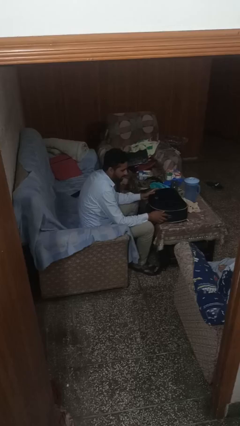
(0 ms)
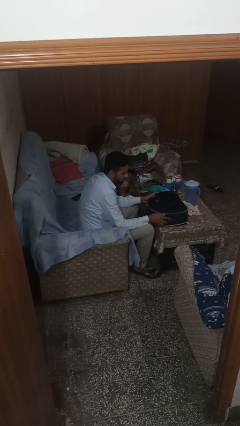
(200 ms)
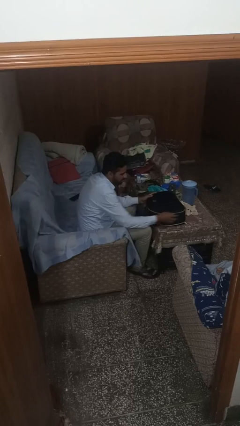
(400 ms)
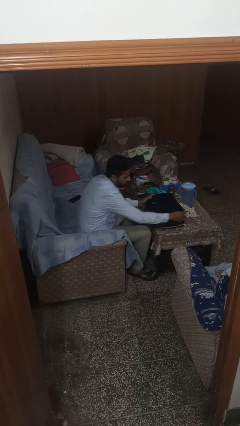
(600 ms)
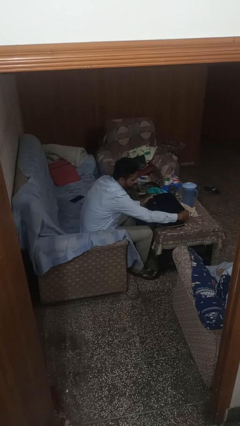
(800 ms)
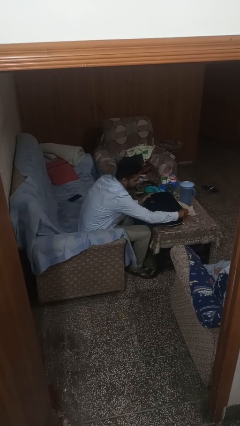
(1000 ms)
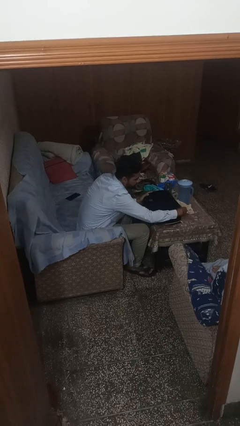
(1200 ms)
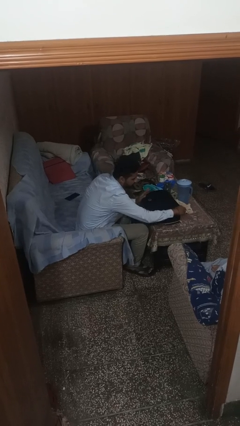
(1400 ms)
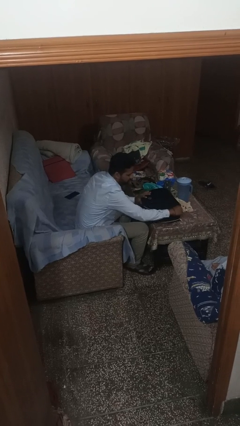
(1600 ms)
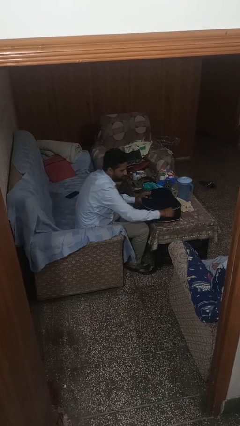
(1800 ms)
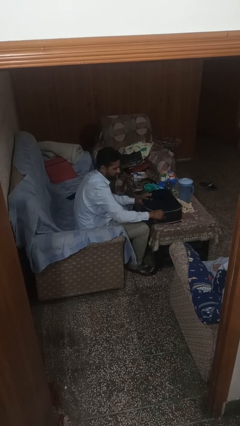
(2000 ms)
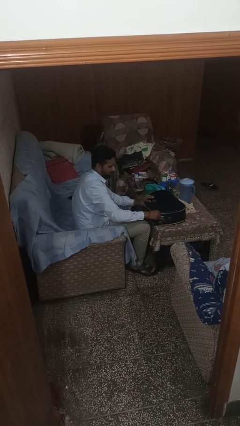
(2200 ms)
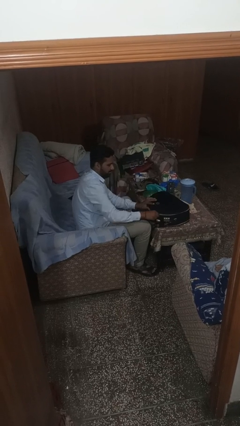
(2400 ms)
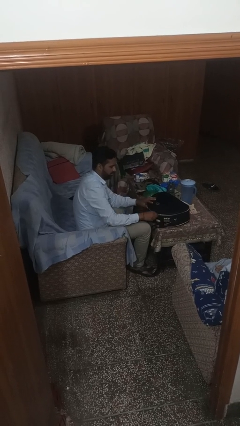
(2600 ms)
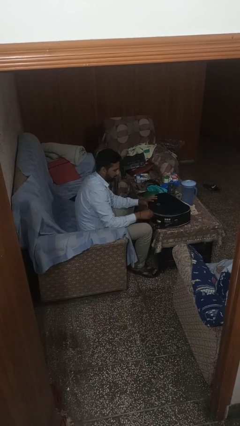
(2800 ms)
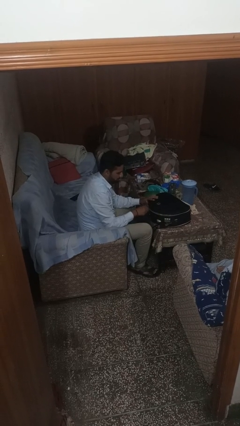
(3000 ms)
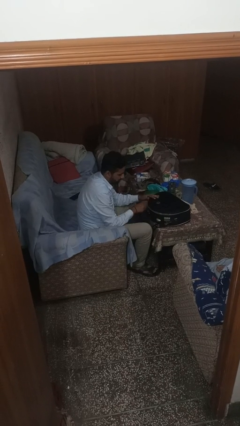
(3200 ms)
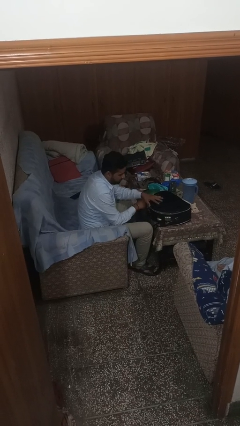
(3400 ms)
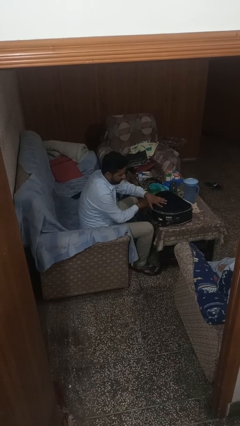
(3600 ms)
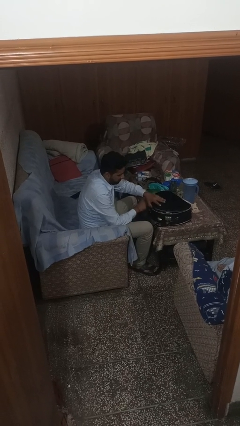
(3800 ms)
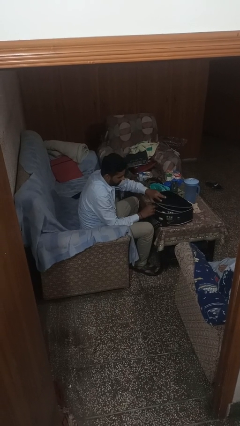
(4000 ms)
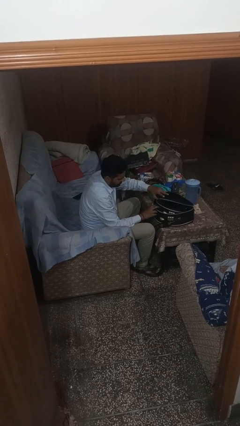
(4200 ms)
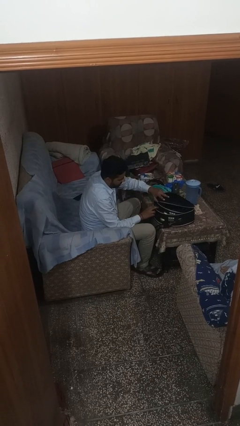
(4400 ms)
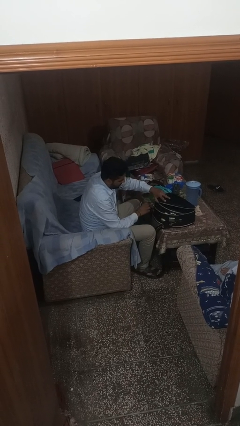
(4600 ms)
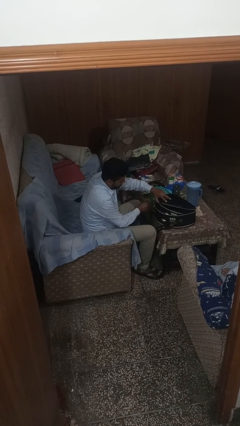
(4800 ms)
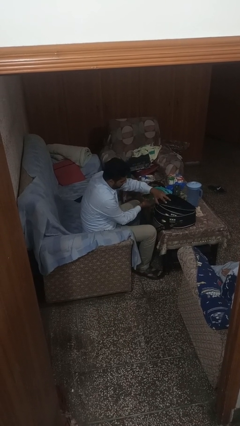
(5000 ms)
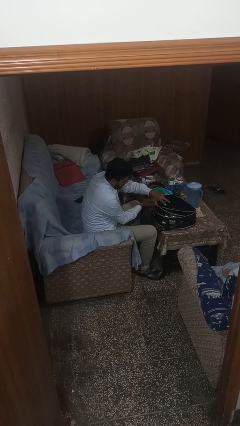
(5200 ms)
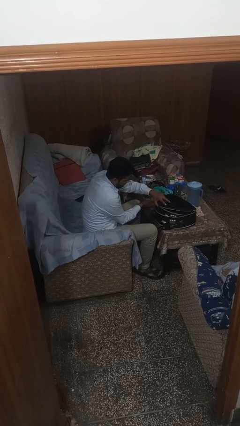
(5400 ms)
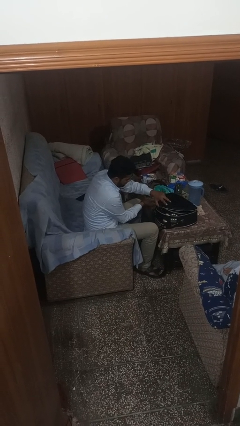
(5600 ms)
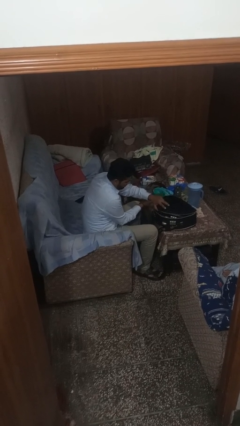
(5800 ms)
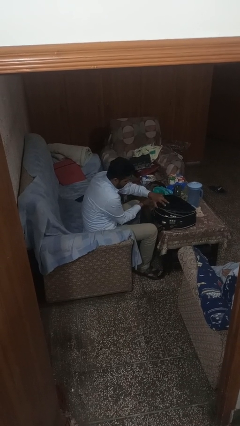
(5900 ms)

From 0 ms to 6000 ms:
person opens suitcase

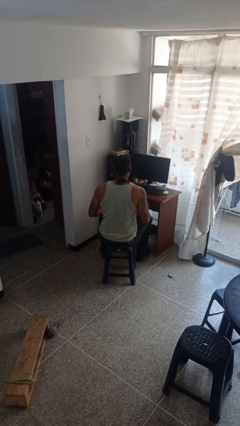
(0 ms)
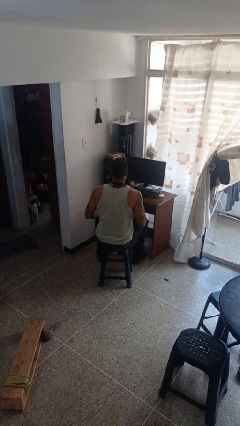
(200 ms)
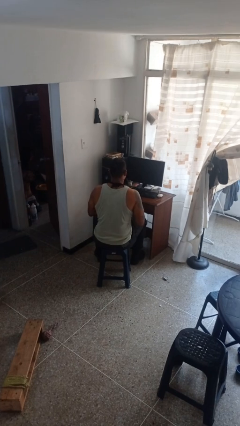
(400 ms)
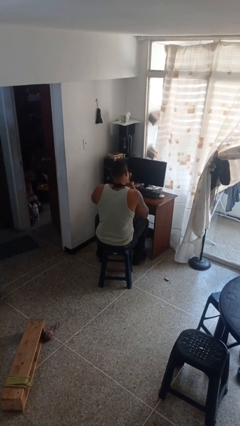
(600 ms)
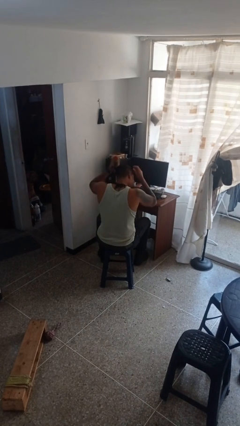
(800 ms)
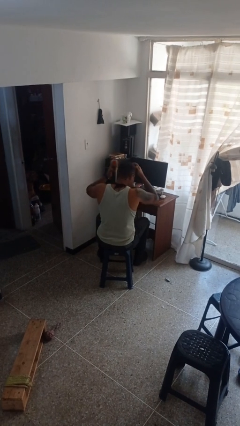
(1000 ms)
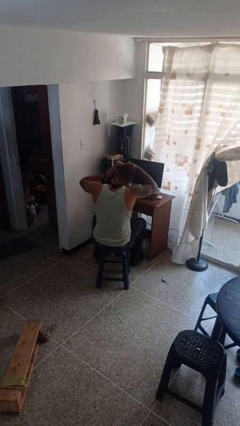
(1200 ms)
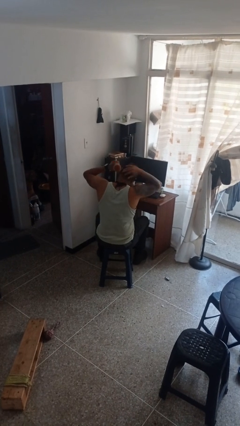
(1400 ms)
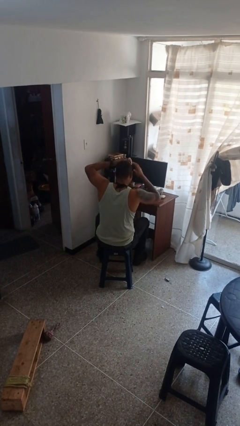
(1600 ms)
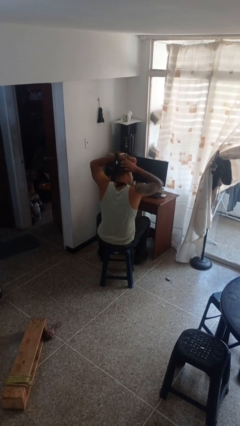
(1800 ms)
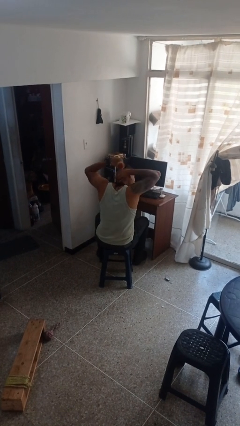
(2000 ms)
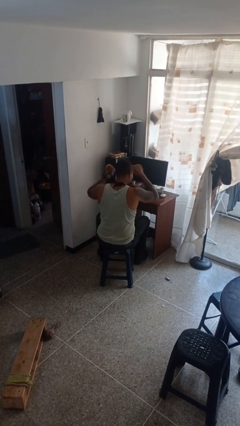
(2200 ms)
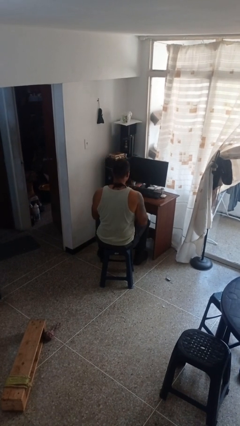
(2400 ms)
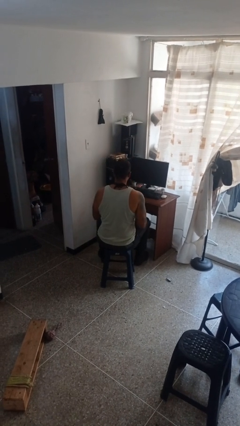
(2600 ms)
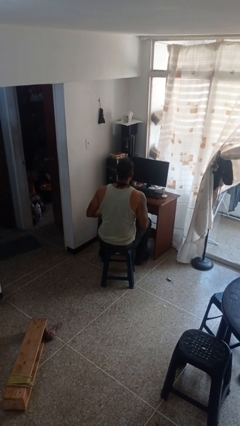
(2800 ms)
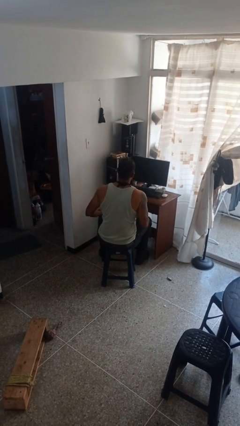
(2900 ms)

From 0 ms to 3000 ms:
person brushes hair

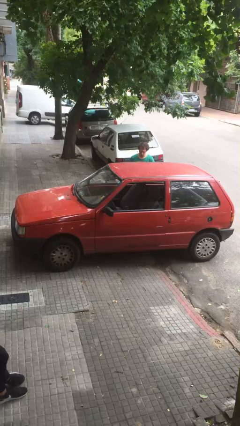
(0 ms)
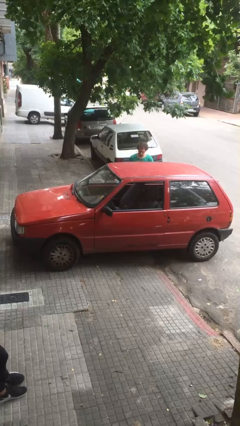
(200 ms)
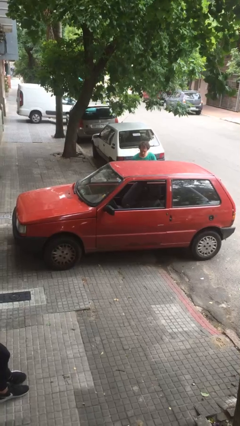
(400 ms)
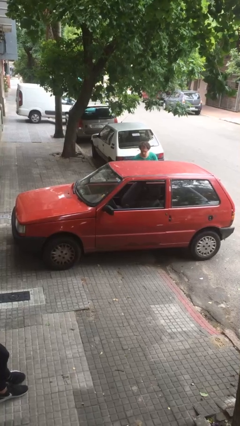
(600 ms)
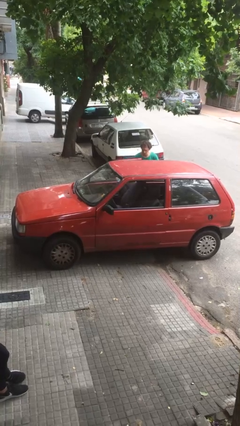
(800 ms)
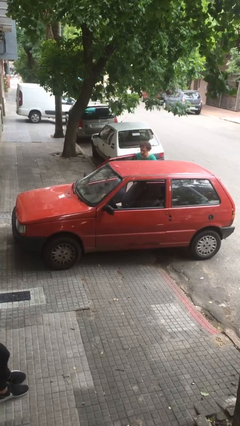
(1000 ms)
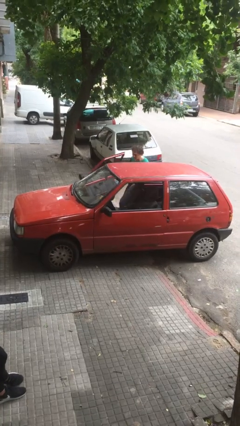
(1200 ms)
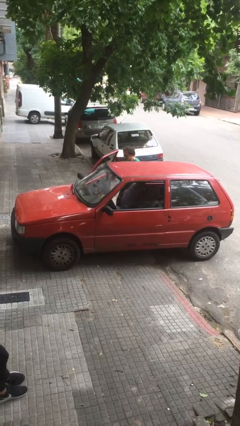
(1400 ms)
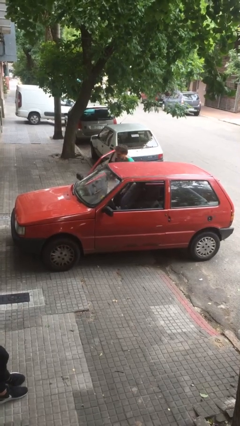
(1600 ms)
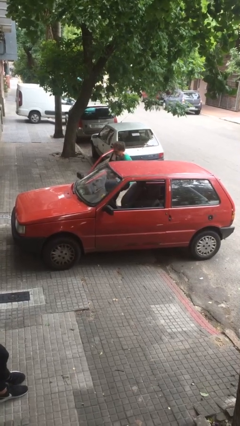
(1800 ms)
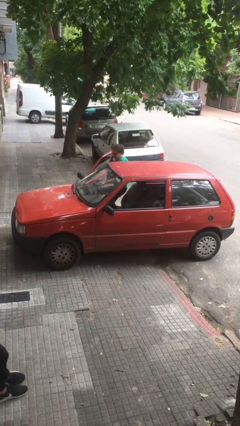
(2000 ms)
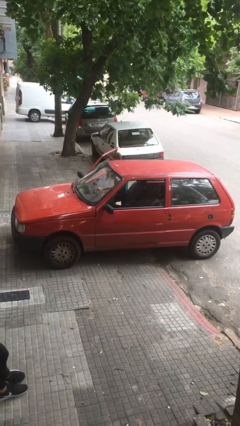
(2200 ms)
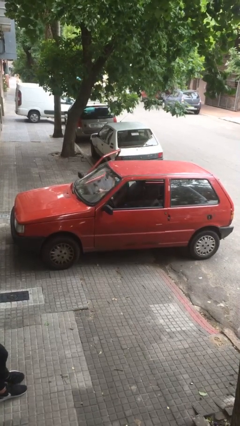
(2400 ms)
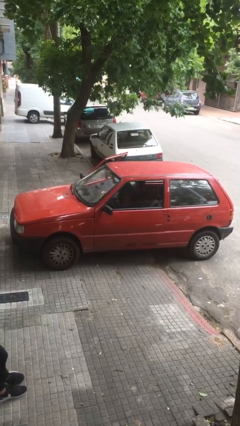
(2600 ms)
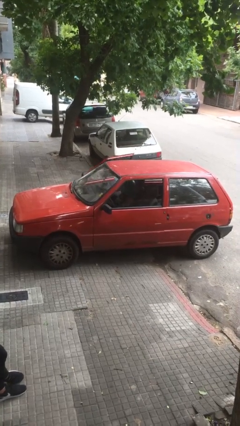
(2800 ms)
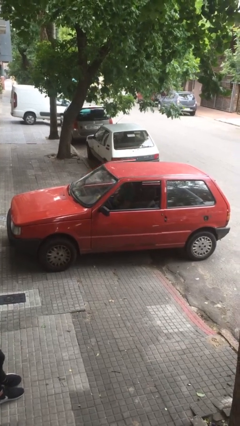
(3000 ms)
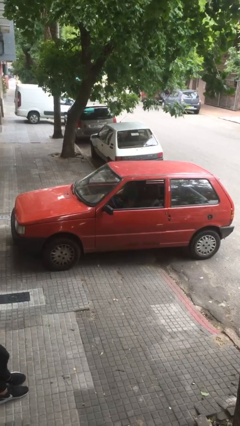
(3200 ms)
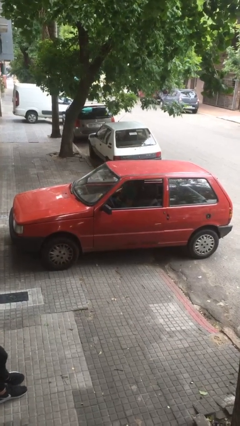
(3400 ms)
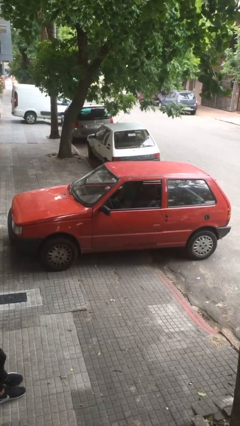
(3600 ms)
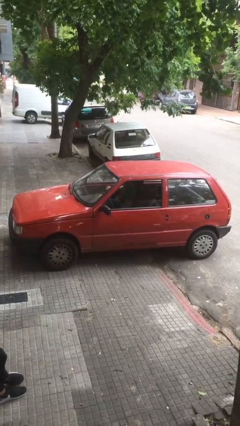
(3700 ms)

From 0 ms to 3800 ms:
car picks up person

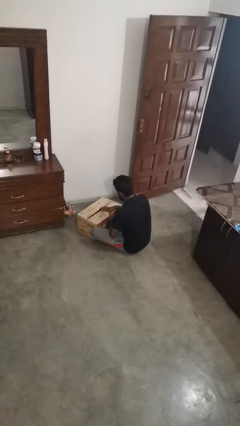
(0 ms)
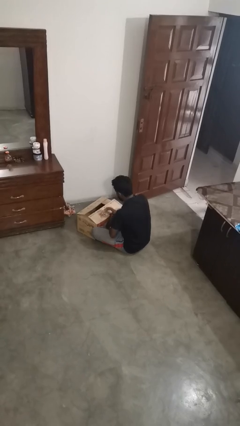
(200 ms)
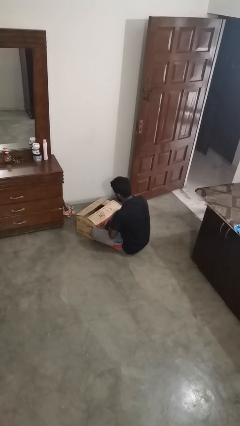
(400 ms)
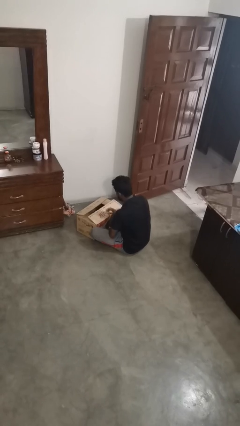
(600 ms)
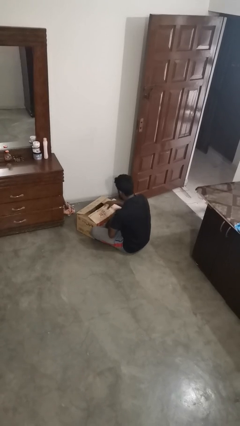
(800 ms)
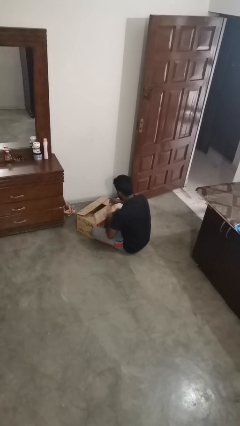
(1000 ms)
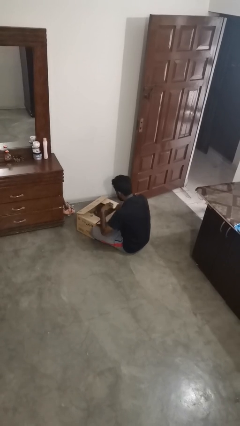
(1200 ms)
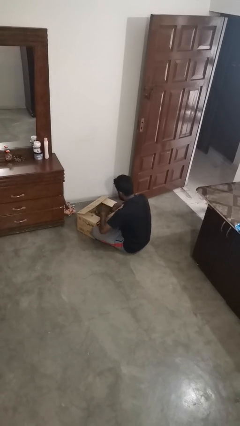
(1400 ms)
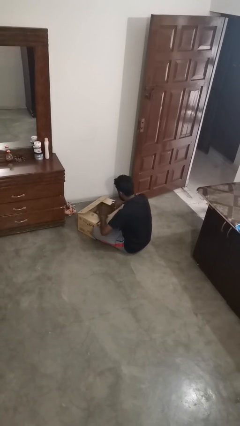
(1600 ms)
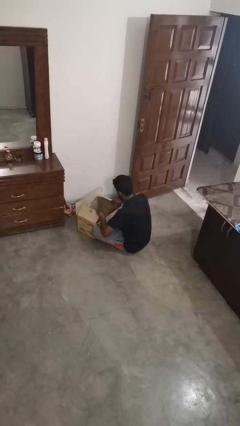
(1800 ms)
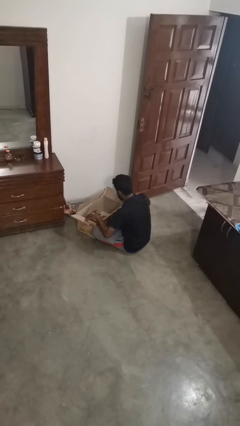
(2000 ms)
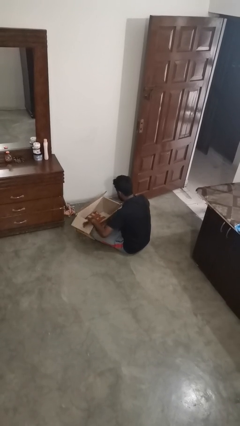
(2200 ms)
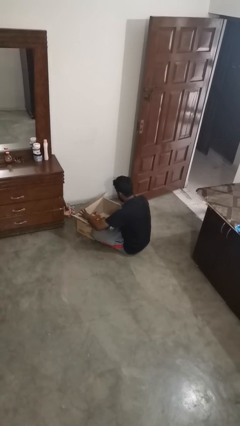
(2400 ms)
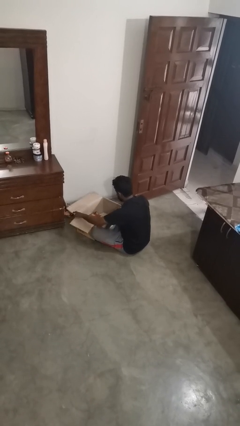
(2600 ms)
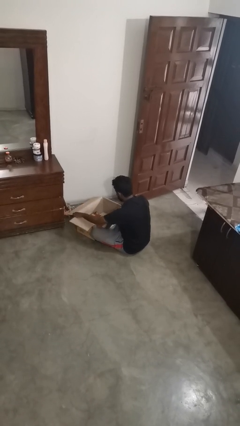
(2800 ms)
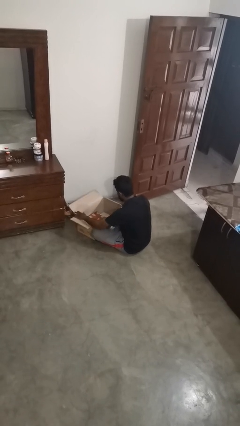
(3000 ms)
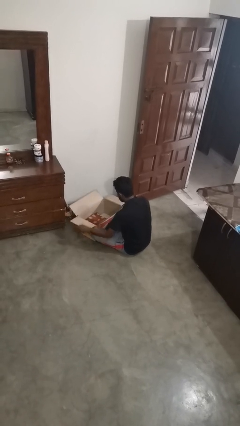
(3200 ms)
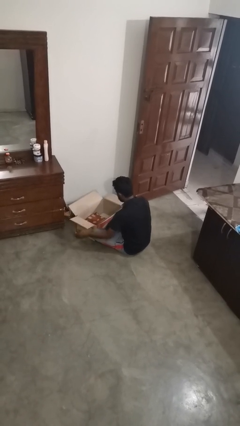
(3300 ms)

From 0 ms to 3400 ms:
person opens box

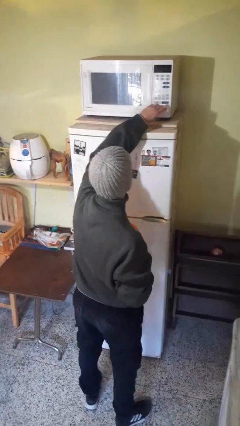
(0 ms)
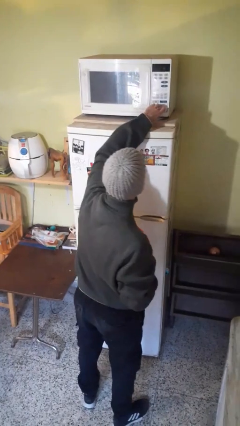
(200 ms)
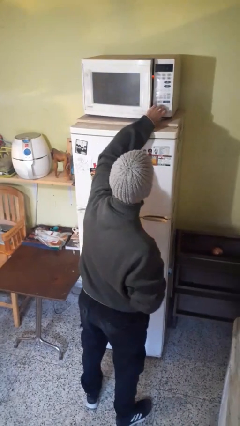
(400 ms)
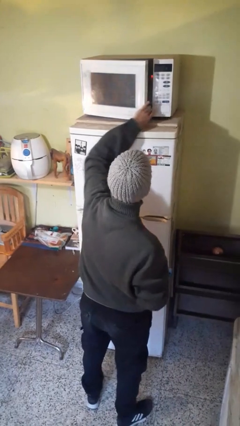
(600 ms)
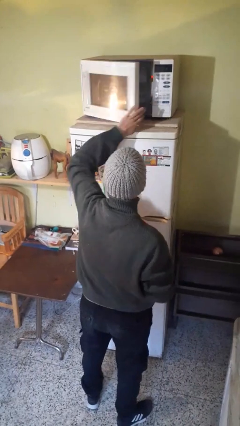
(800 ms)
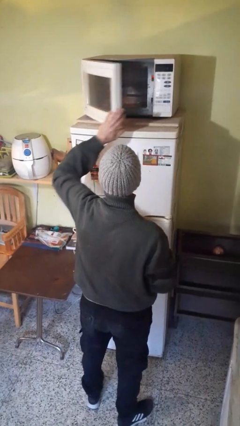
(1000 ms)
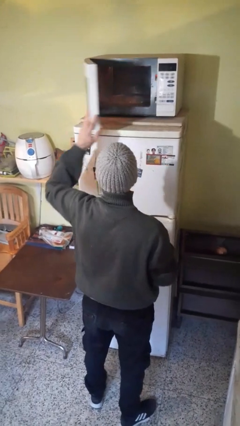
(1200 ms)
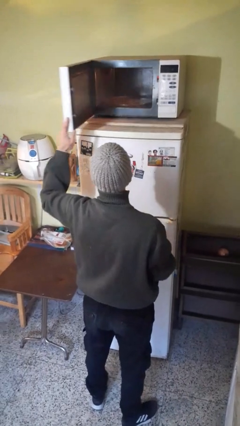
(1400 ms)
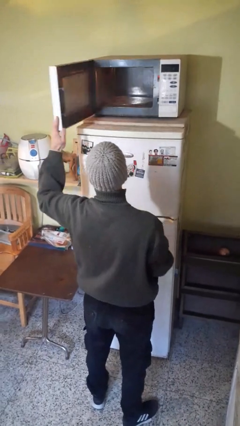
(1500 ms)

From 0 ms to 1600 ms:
person opens microwave
